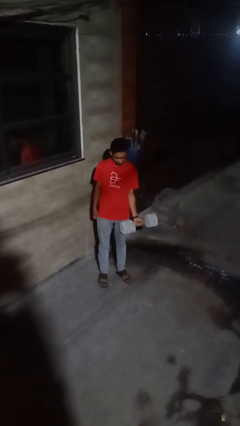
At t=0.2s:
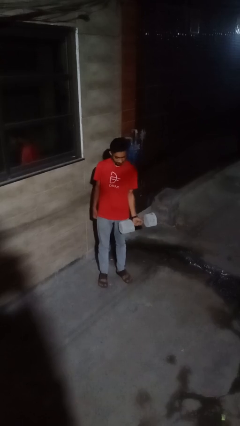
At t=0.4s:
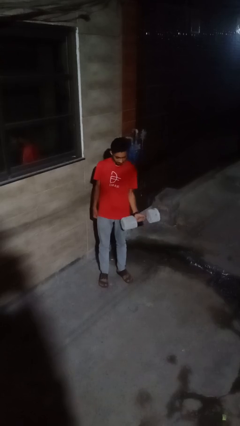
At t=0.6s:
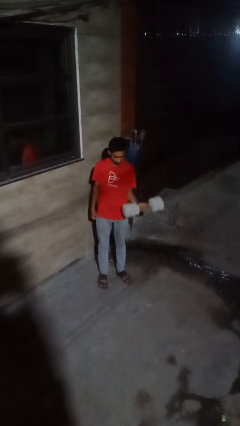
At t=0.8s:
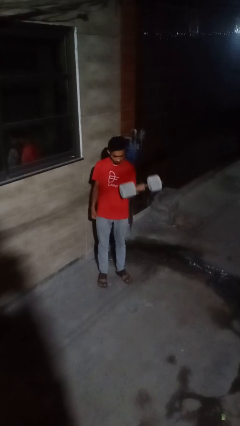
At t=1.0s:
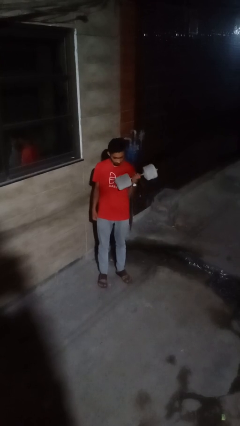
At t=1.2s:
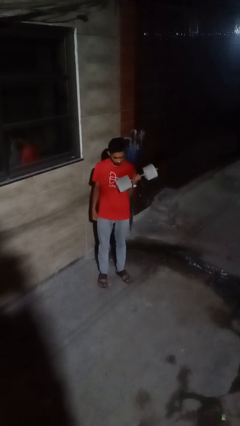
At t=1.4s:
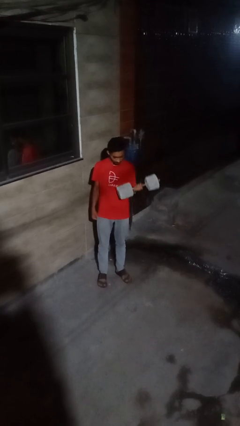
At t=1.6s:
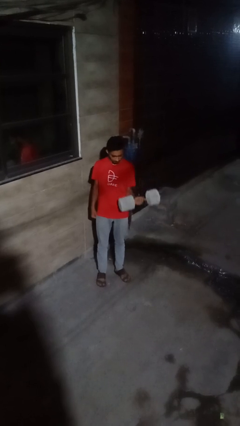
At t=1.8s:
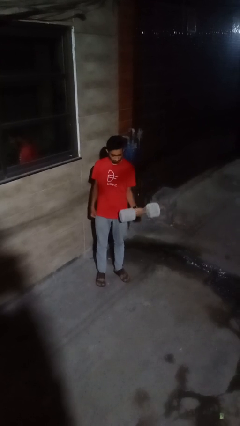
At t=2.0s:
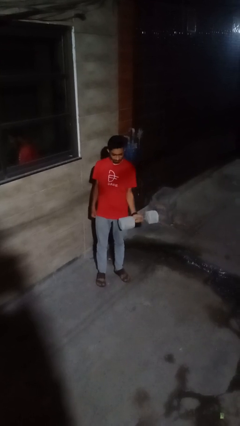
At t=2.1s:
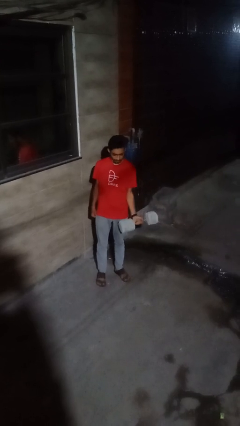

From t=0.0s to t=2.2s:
person lifts dumbbells

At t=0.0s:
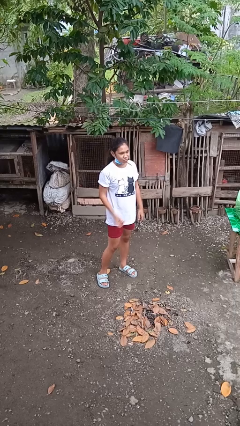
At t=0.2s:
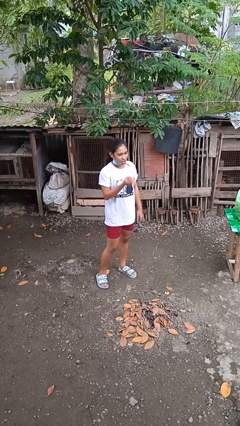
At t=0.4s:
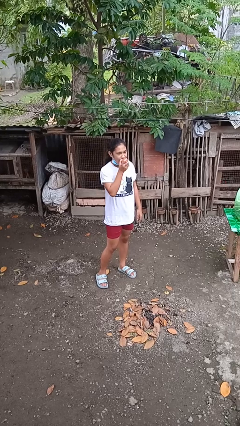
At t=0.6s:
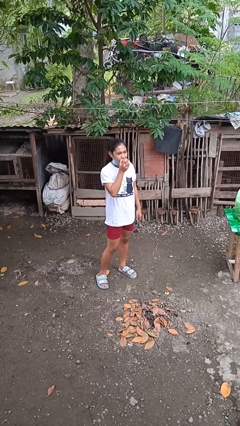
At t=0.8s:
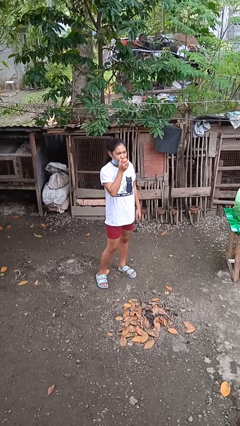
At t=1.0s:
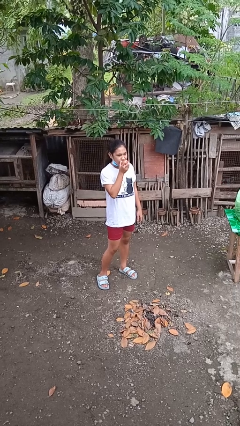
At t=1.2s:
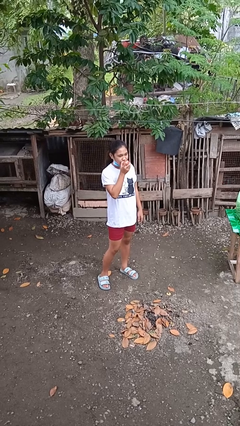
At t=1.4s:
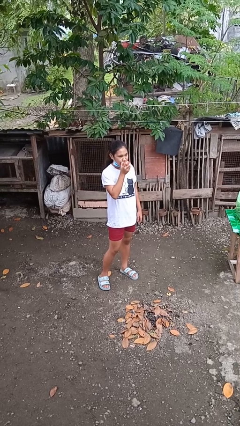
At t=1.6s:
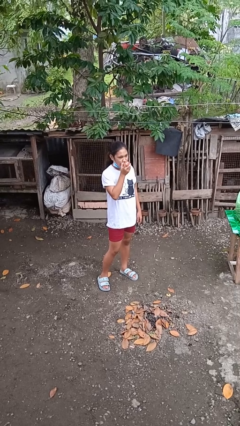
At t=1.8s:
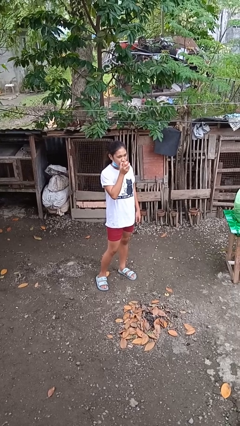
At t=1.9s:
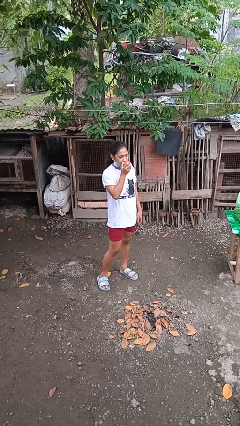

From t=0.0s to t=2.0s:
person eats apple

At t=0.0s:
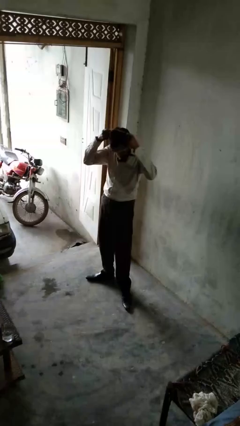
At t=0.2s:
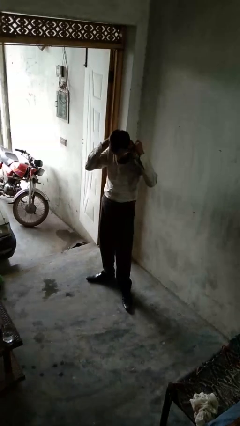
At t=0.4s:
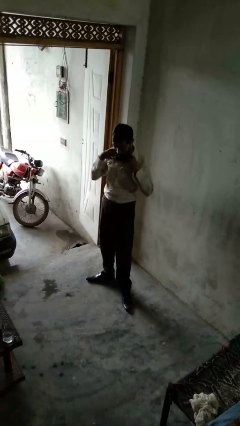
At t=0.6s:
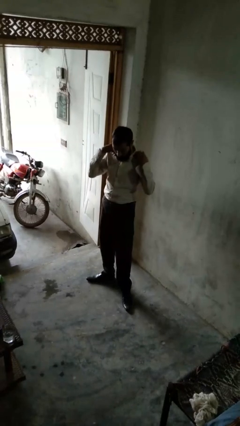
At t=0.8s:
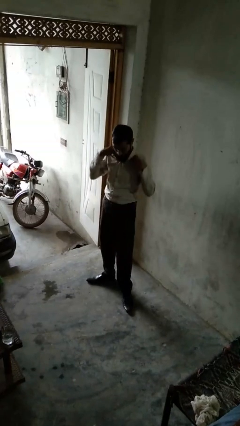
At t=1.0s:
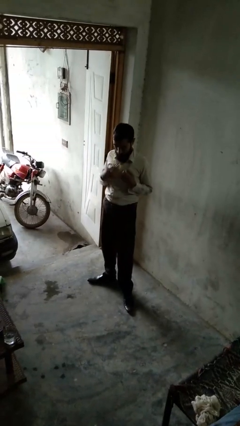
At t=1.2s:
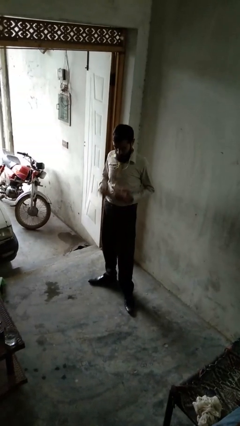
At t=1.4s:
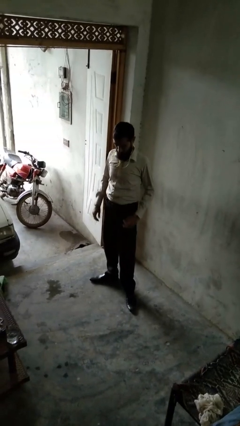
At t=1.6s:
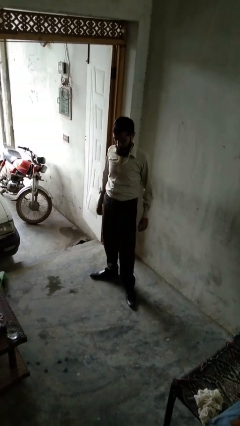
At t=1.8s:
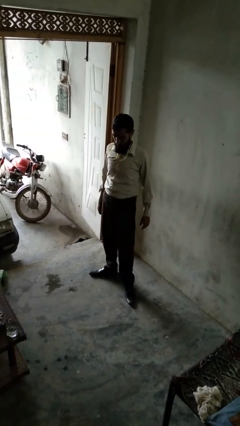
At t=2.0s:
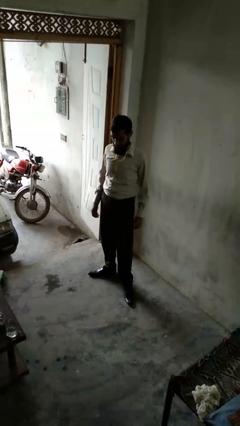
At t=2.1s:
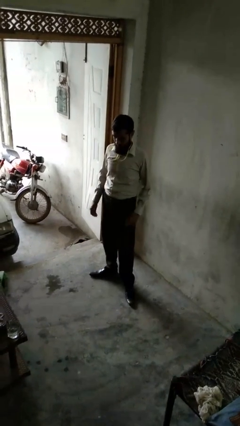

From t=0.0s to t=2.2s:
person puts on necklace

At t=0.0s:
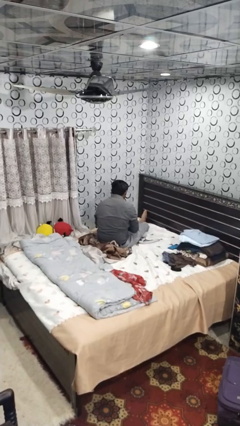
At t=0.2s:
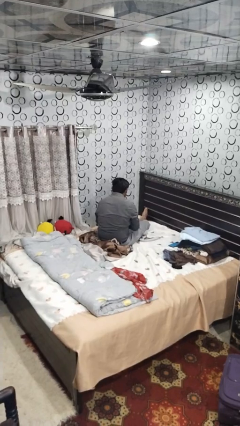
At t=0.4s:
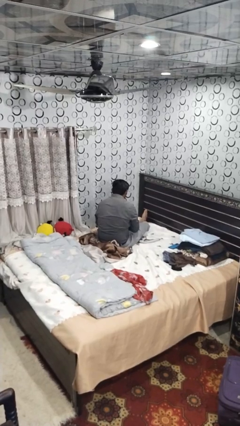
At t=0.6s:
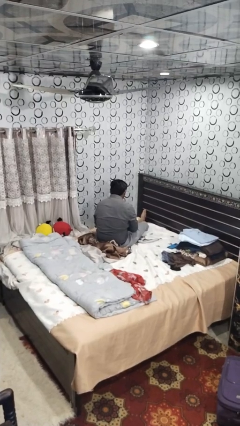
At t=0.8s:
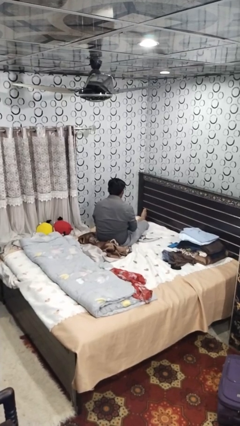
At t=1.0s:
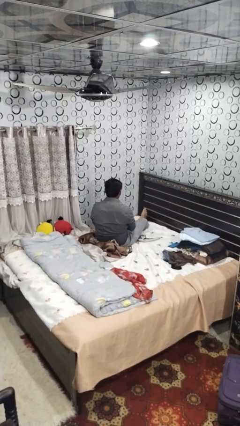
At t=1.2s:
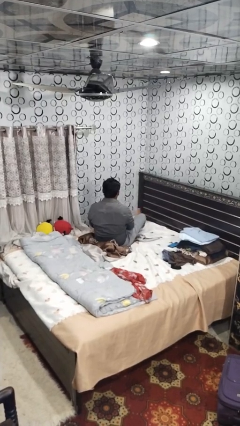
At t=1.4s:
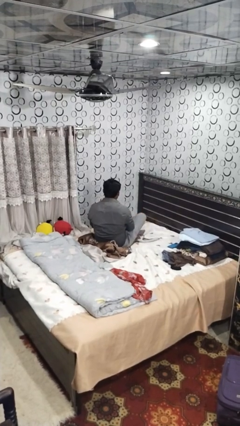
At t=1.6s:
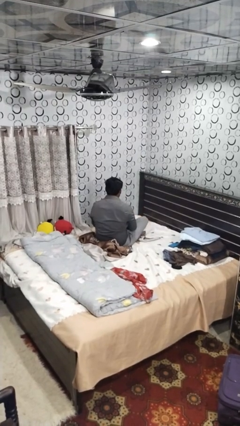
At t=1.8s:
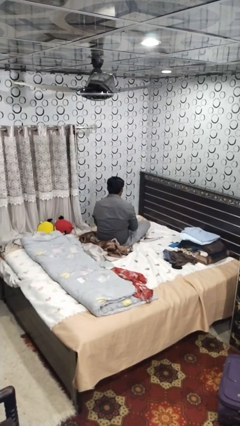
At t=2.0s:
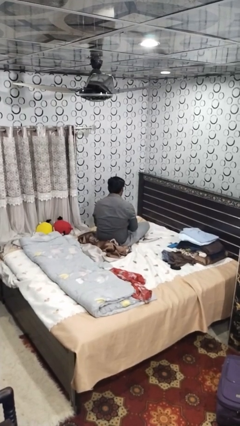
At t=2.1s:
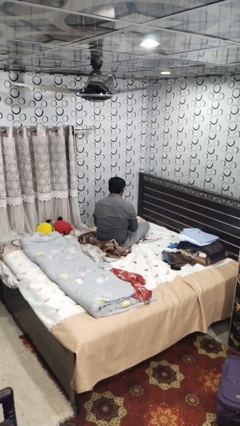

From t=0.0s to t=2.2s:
person crosses legs

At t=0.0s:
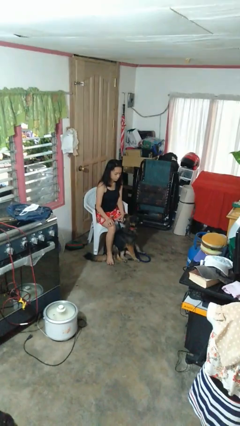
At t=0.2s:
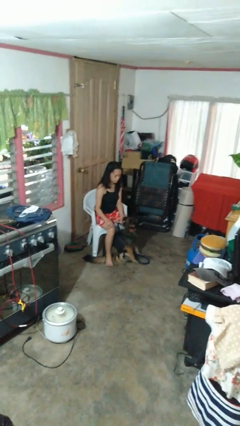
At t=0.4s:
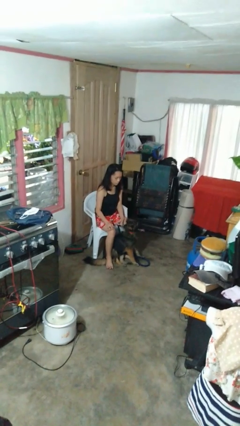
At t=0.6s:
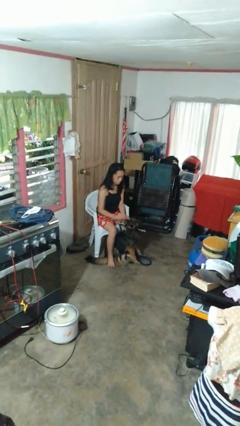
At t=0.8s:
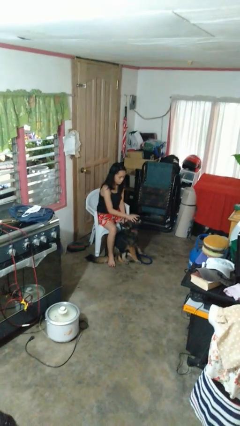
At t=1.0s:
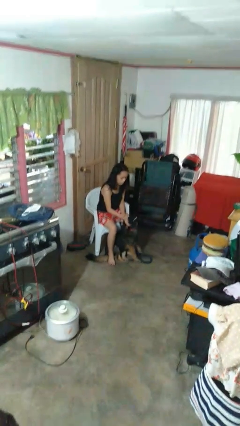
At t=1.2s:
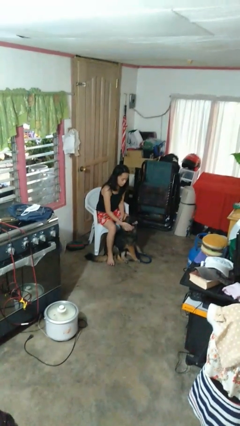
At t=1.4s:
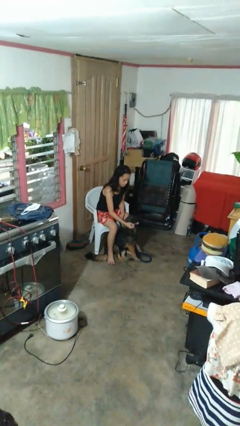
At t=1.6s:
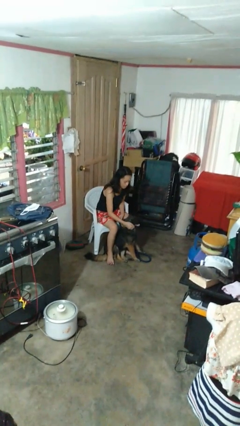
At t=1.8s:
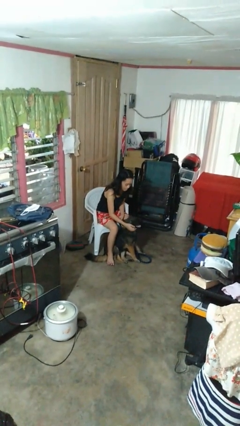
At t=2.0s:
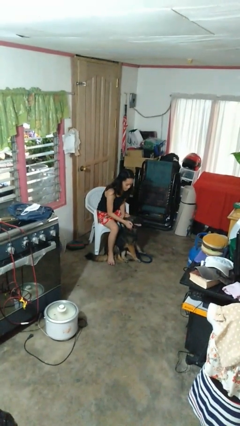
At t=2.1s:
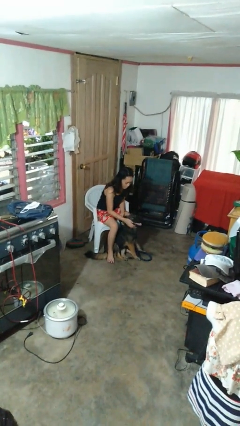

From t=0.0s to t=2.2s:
person pets dog

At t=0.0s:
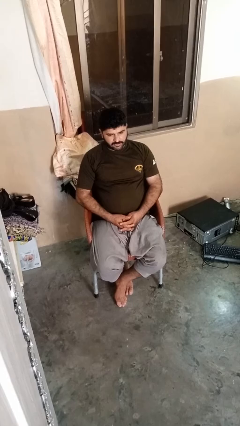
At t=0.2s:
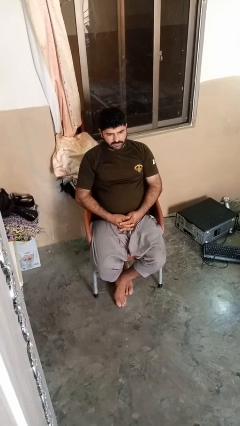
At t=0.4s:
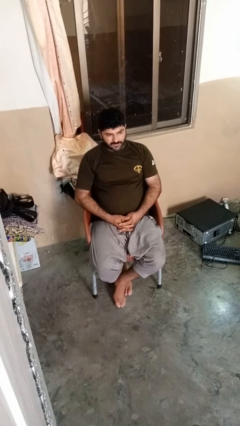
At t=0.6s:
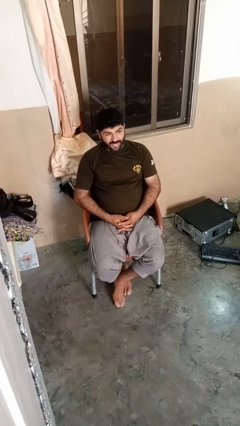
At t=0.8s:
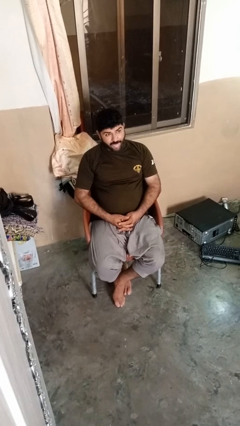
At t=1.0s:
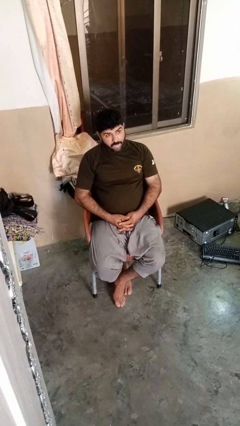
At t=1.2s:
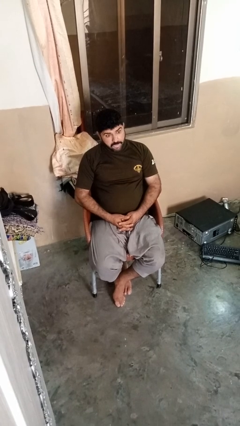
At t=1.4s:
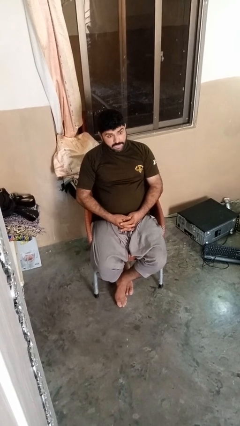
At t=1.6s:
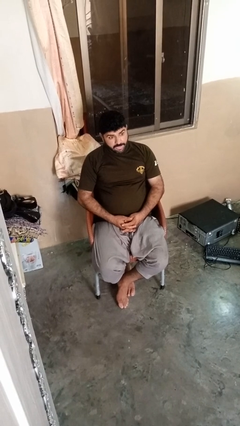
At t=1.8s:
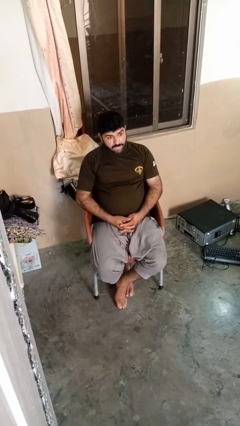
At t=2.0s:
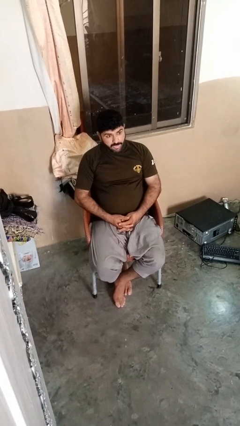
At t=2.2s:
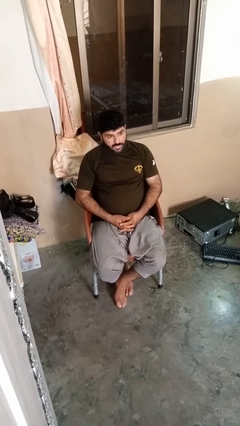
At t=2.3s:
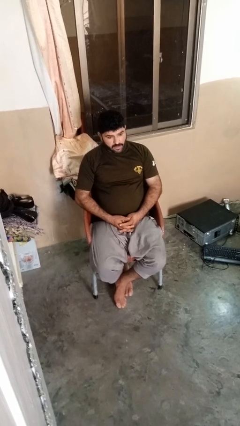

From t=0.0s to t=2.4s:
person sticks out tongue

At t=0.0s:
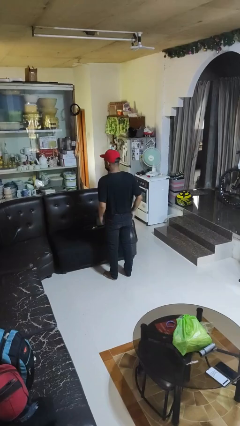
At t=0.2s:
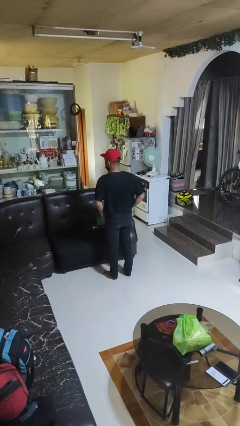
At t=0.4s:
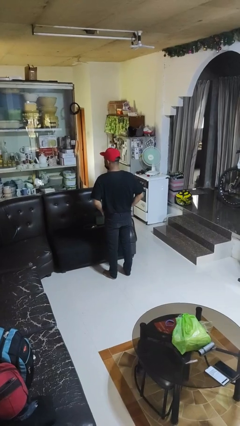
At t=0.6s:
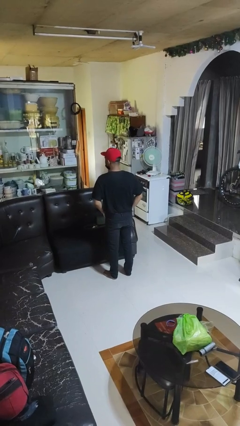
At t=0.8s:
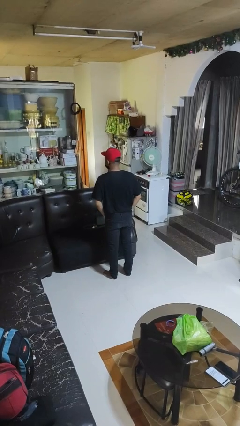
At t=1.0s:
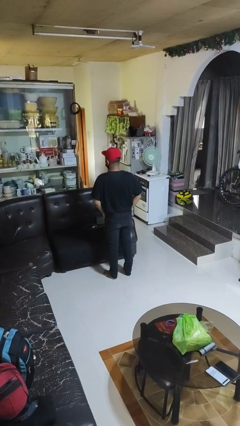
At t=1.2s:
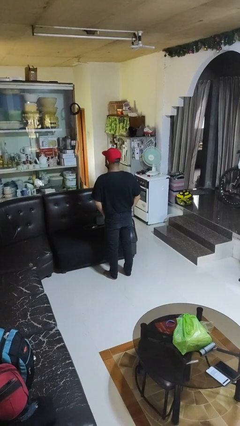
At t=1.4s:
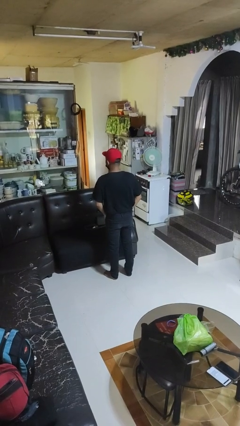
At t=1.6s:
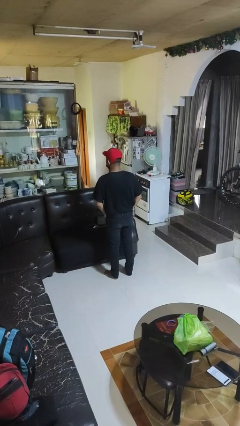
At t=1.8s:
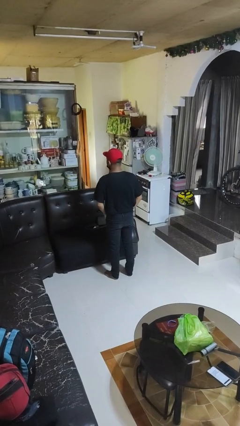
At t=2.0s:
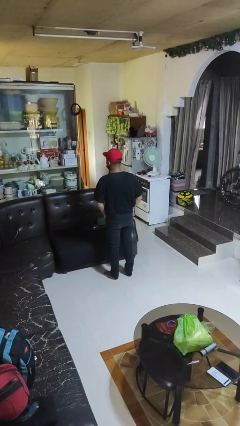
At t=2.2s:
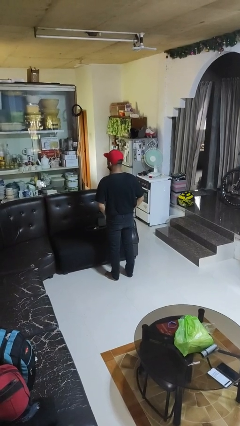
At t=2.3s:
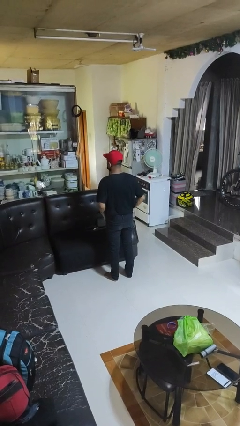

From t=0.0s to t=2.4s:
person puts hands in back pockets

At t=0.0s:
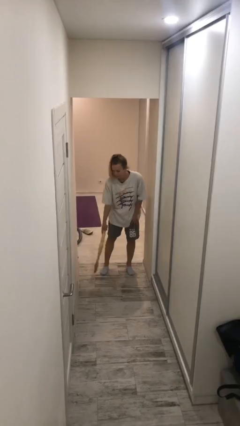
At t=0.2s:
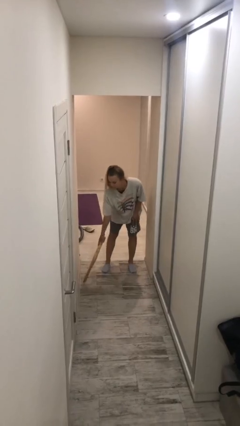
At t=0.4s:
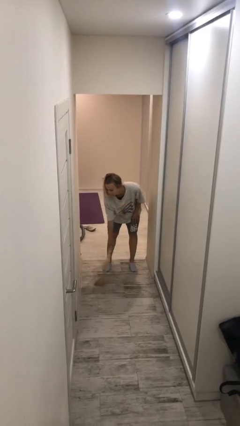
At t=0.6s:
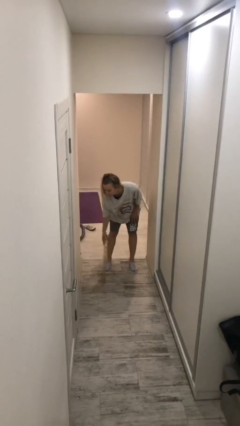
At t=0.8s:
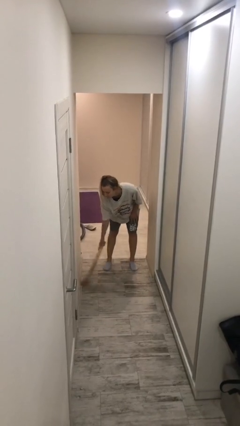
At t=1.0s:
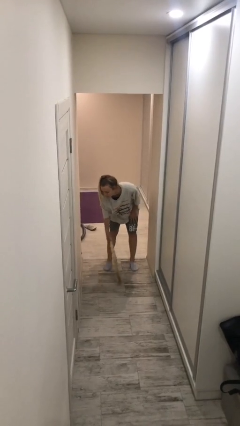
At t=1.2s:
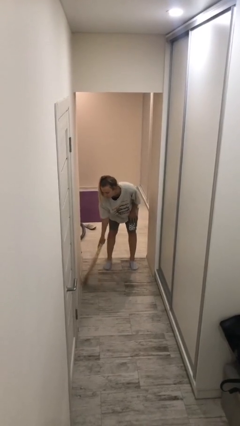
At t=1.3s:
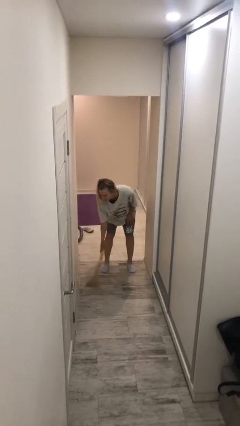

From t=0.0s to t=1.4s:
person sweeps floor
